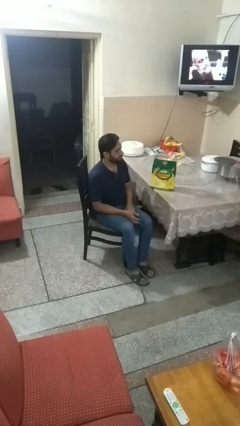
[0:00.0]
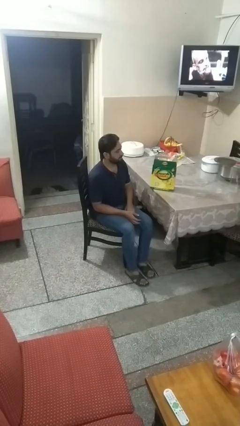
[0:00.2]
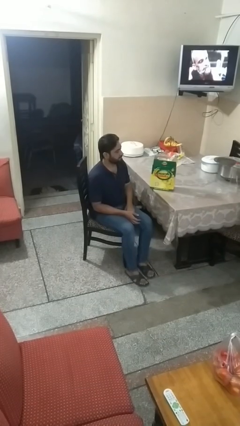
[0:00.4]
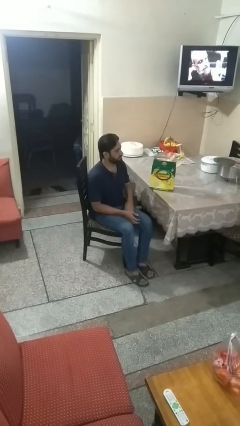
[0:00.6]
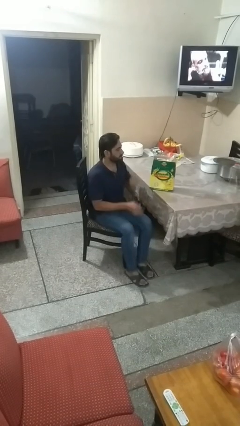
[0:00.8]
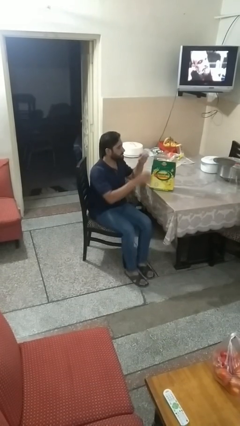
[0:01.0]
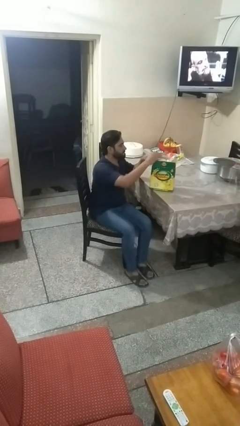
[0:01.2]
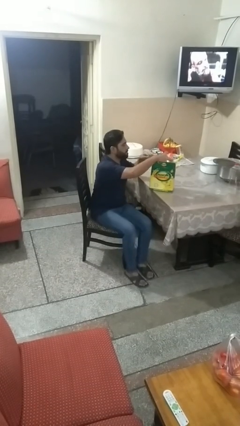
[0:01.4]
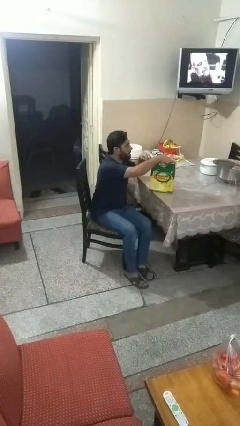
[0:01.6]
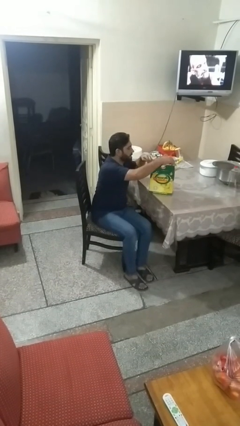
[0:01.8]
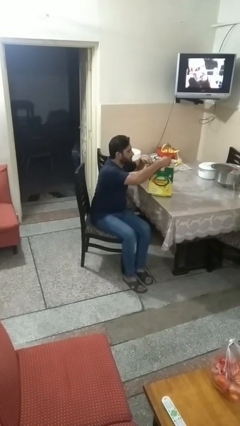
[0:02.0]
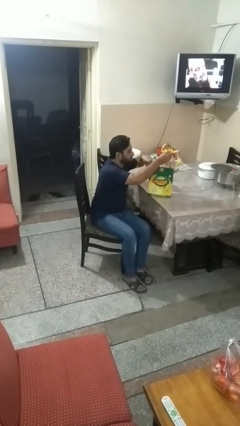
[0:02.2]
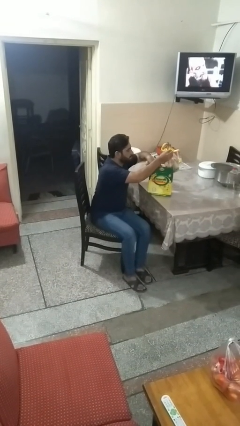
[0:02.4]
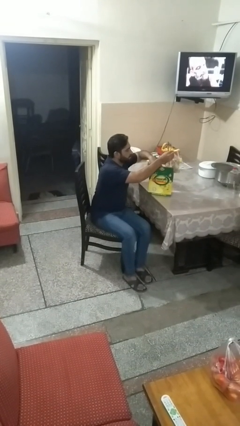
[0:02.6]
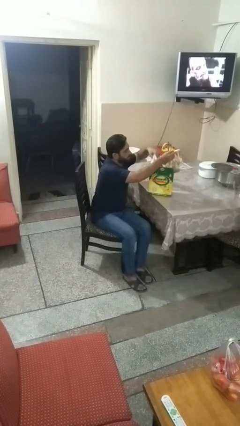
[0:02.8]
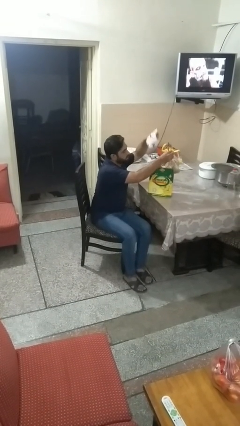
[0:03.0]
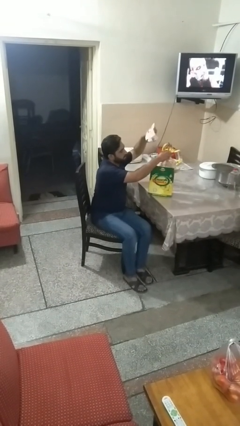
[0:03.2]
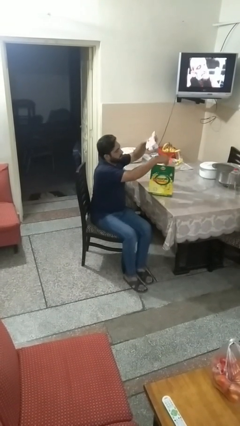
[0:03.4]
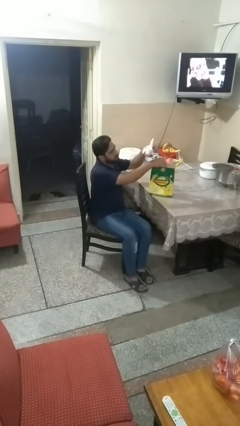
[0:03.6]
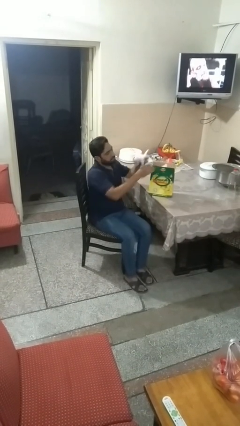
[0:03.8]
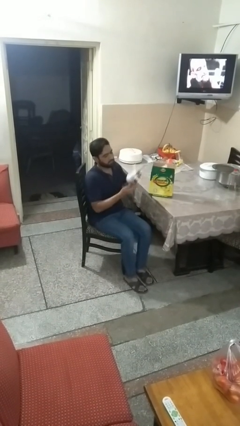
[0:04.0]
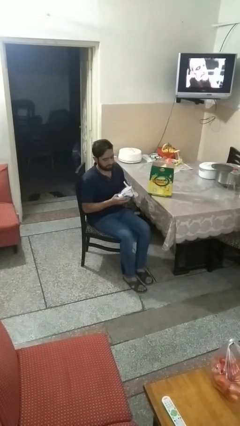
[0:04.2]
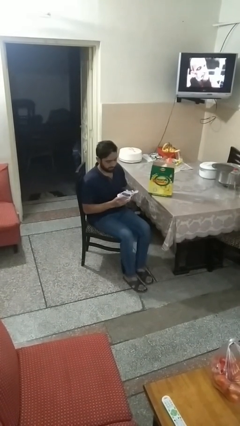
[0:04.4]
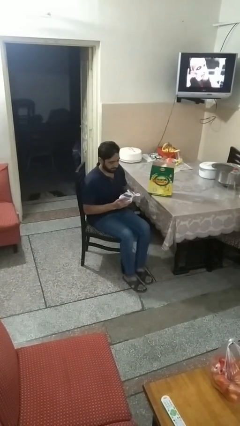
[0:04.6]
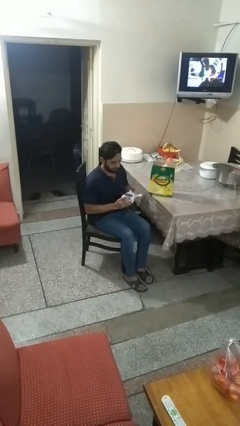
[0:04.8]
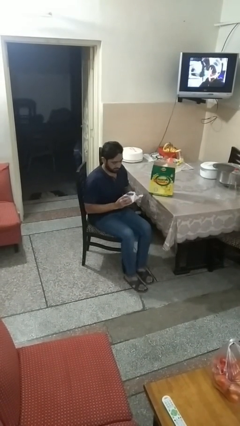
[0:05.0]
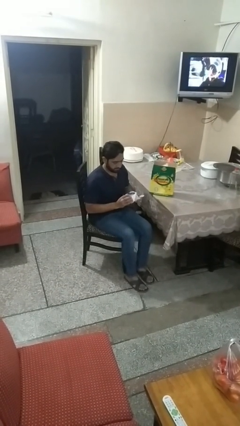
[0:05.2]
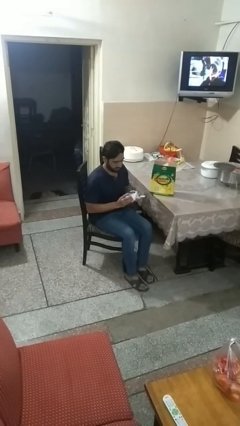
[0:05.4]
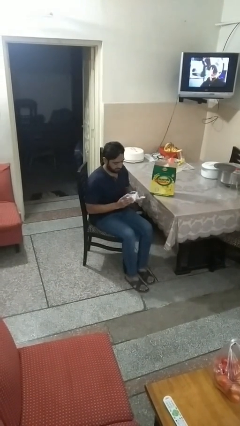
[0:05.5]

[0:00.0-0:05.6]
person takes object from box

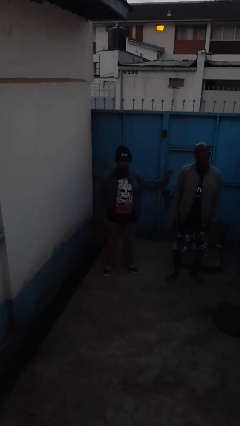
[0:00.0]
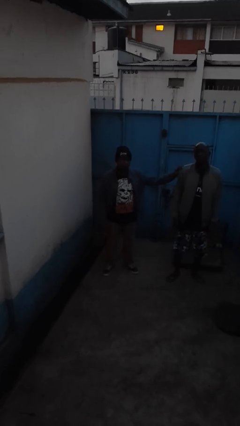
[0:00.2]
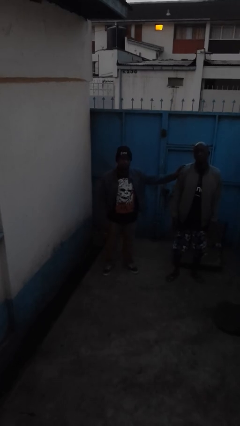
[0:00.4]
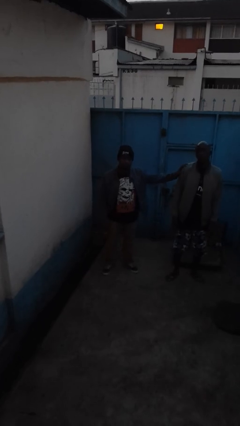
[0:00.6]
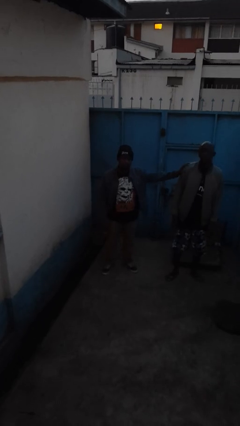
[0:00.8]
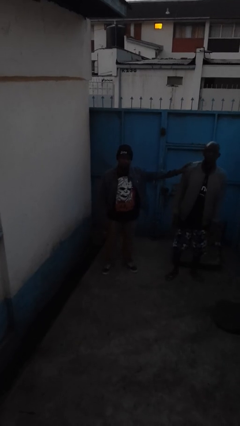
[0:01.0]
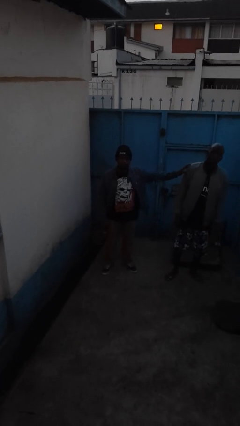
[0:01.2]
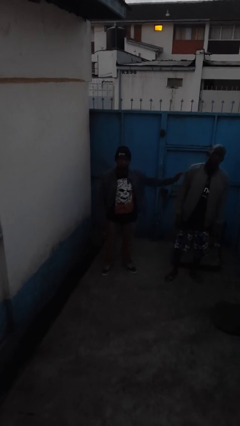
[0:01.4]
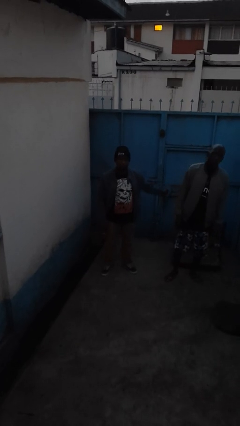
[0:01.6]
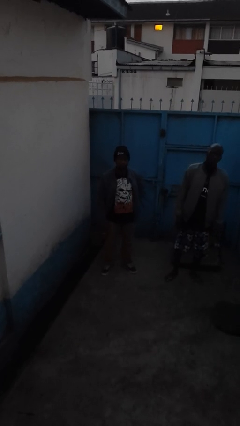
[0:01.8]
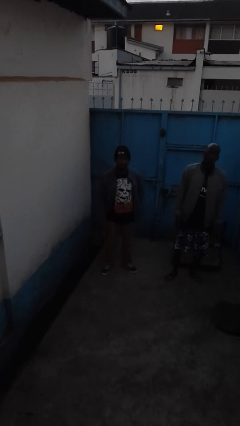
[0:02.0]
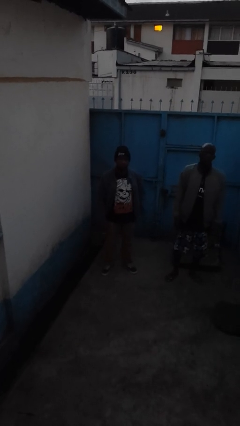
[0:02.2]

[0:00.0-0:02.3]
person shoves person

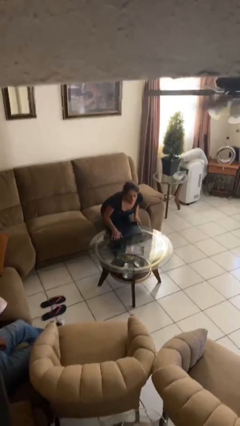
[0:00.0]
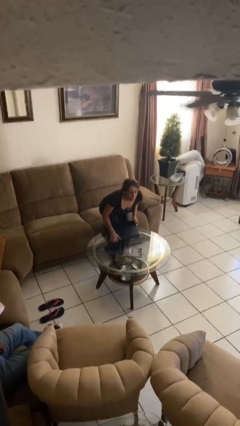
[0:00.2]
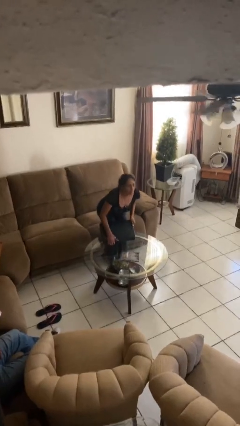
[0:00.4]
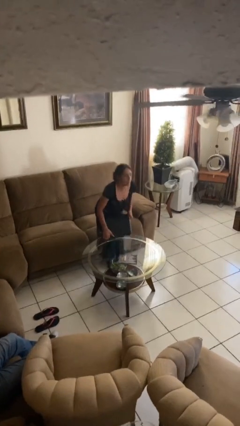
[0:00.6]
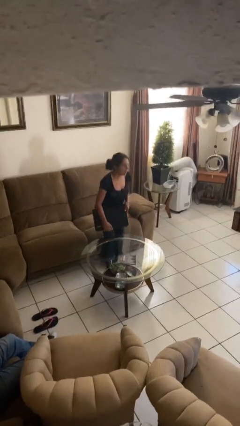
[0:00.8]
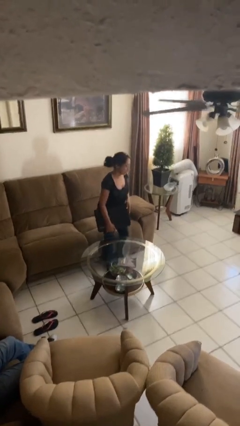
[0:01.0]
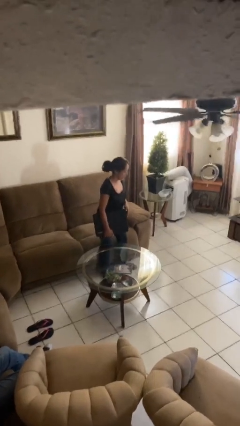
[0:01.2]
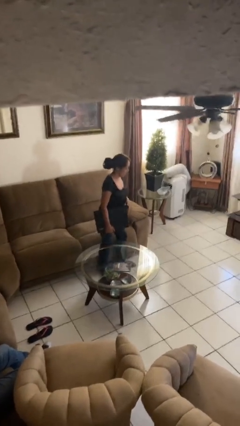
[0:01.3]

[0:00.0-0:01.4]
person stands up

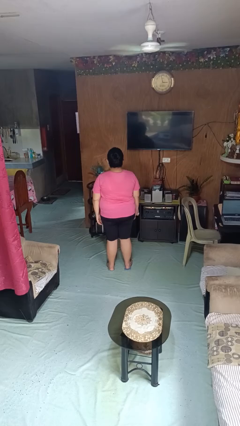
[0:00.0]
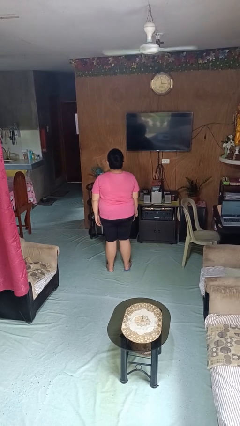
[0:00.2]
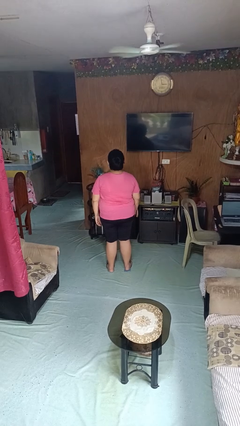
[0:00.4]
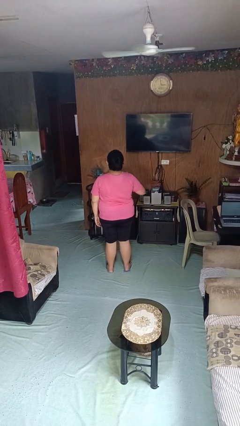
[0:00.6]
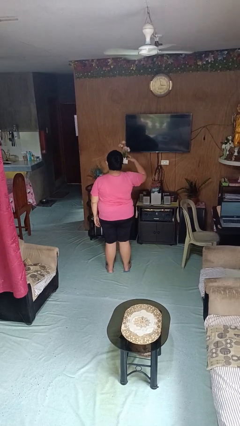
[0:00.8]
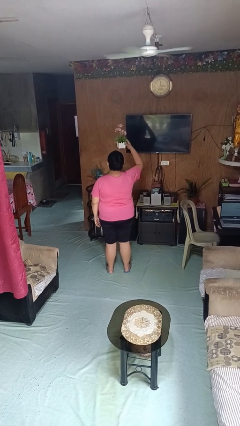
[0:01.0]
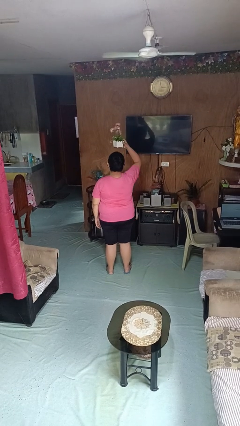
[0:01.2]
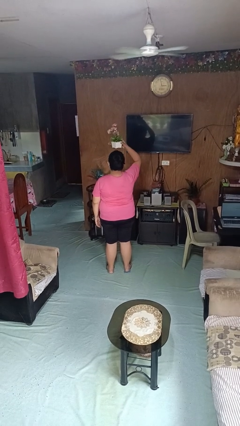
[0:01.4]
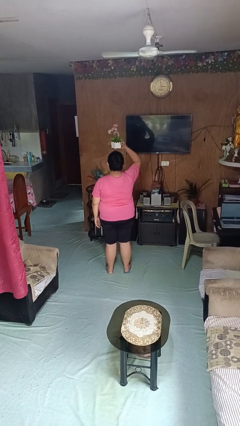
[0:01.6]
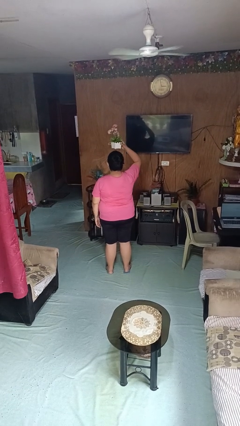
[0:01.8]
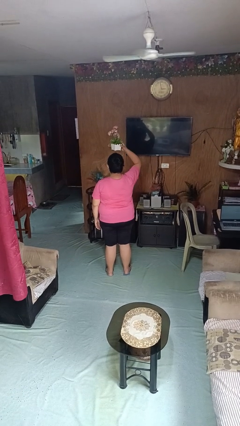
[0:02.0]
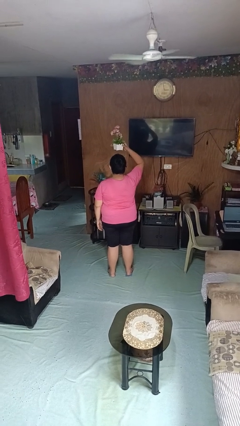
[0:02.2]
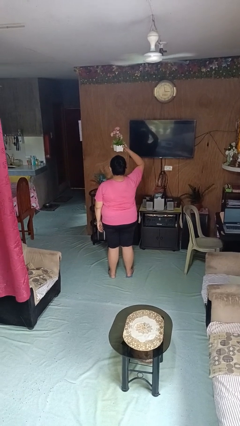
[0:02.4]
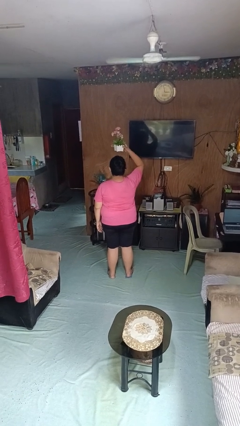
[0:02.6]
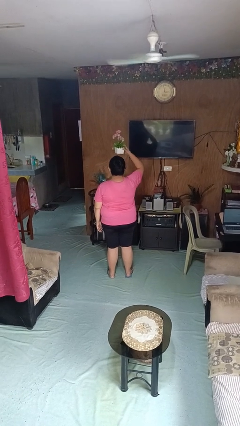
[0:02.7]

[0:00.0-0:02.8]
person holds object above head

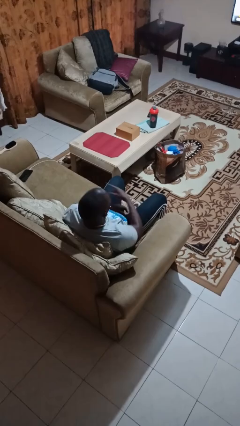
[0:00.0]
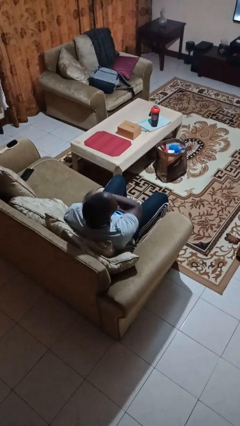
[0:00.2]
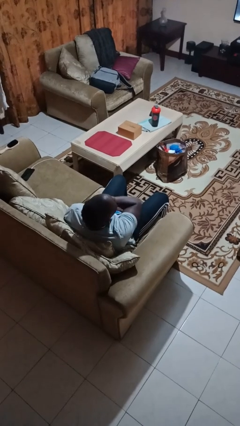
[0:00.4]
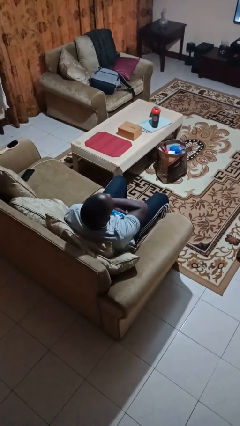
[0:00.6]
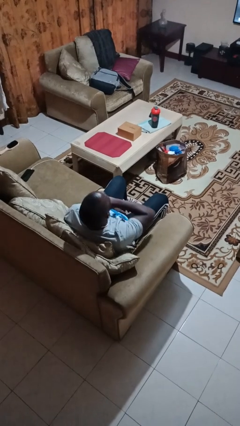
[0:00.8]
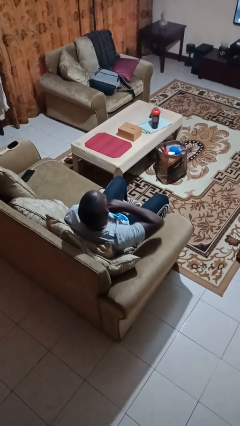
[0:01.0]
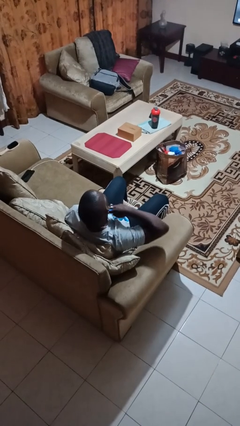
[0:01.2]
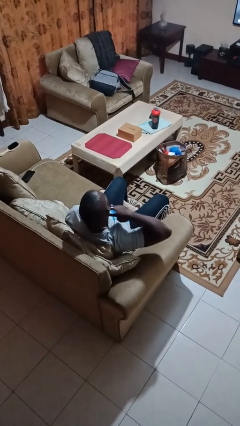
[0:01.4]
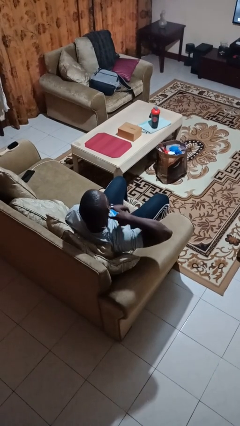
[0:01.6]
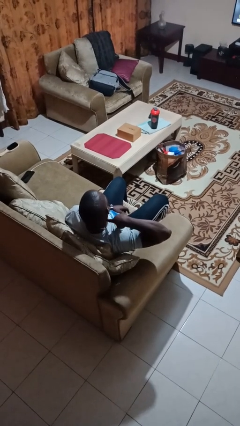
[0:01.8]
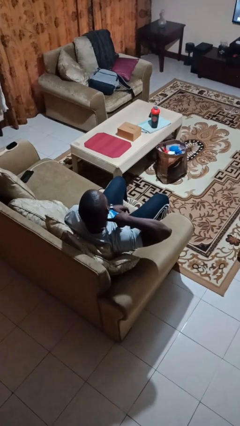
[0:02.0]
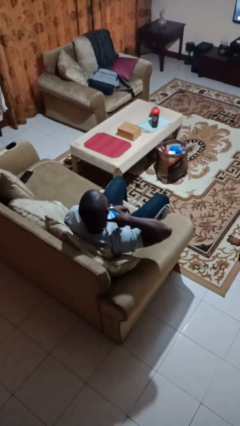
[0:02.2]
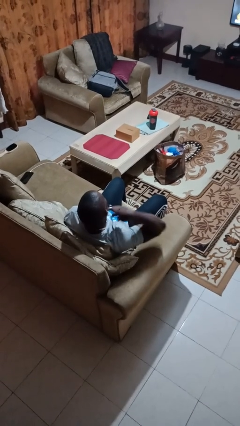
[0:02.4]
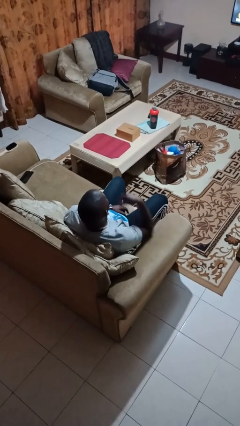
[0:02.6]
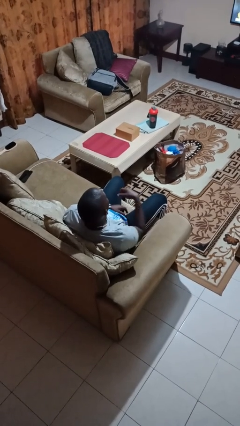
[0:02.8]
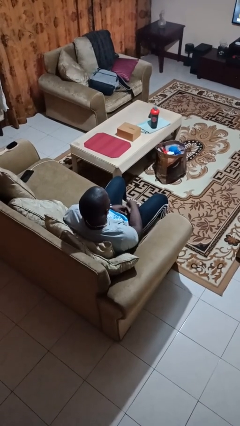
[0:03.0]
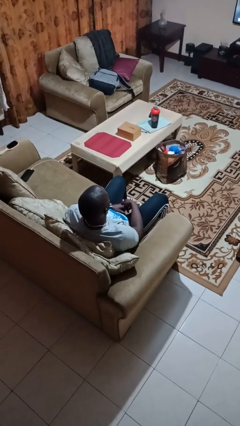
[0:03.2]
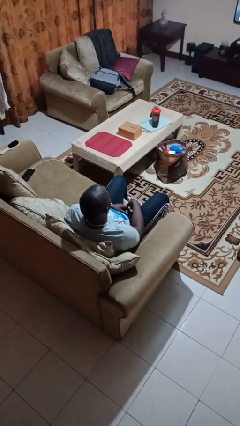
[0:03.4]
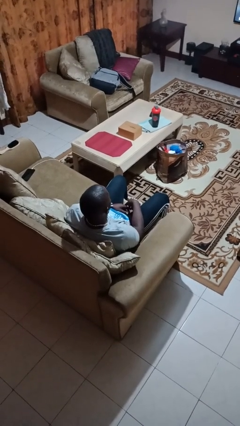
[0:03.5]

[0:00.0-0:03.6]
person gestures cut

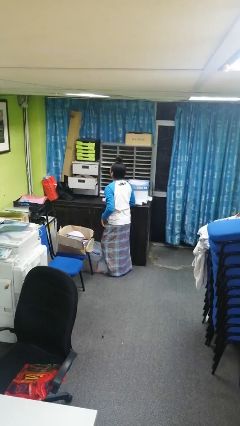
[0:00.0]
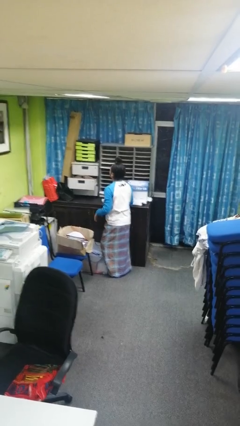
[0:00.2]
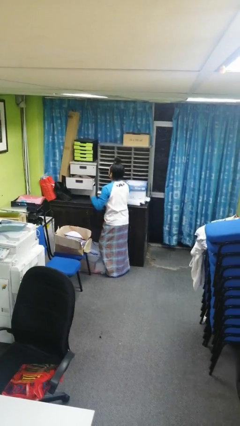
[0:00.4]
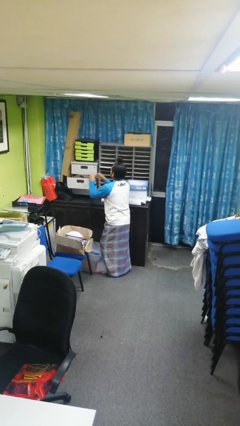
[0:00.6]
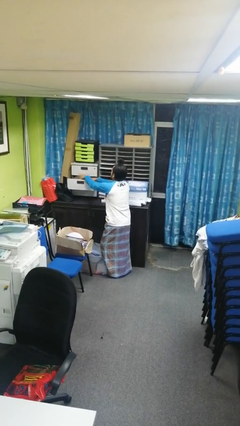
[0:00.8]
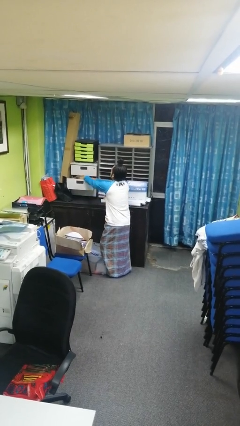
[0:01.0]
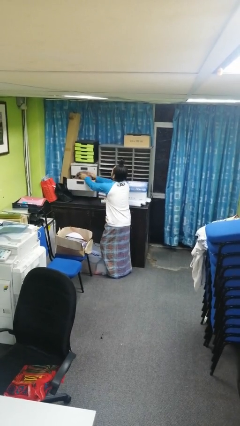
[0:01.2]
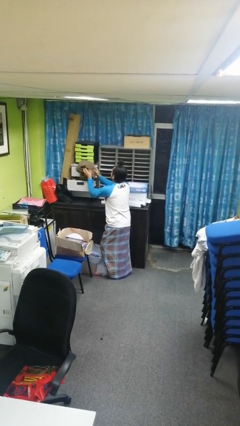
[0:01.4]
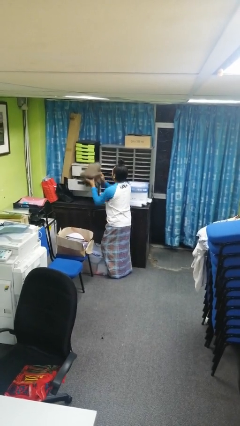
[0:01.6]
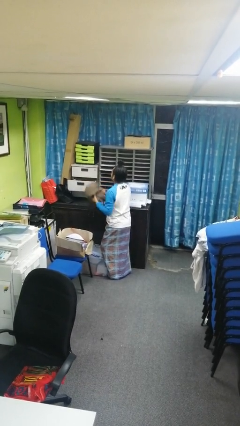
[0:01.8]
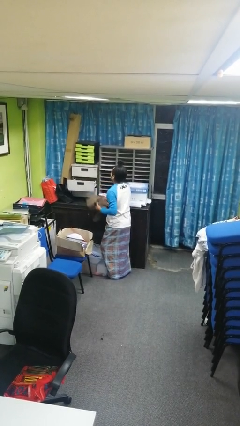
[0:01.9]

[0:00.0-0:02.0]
person takes clothes from dresser
